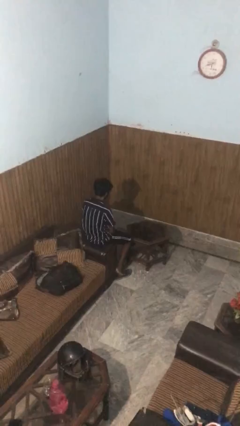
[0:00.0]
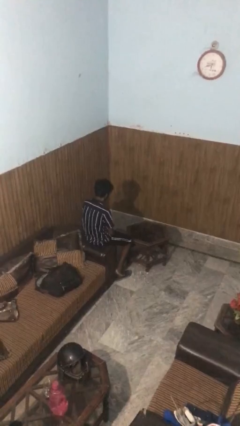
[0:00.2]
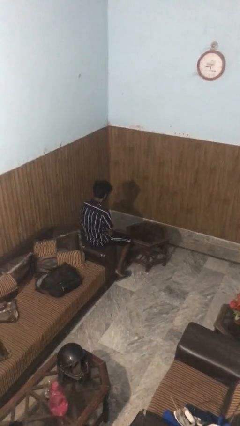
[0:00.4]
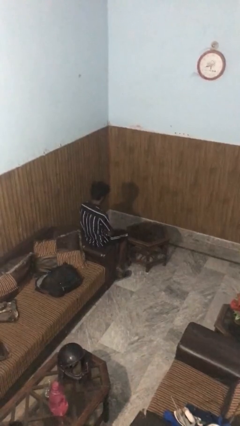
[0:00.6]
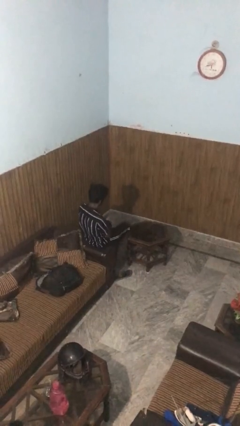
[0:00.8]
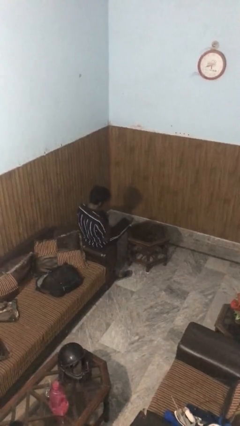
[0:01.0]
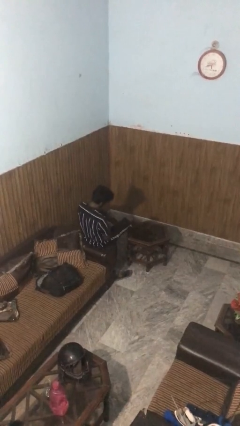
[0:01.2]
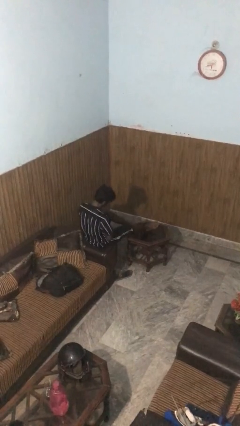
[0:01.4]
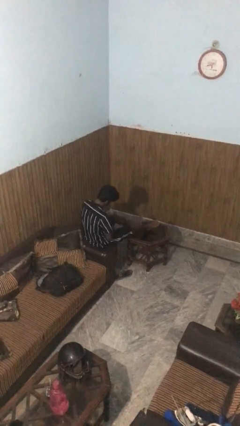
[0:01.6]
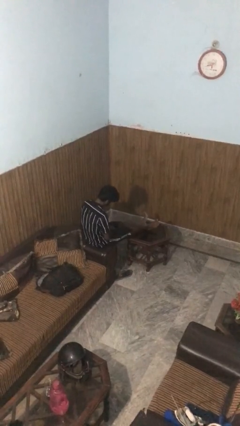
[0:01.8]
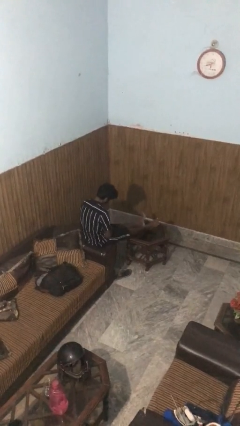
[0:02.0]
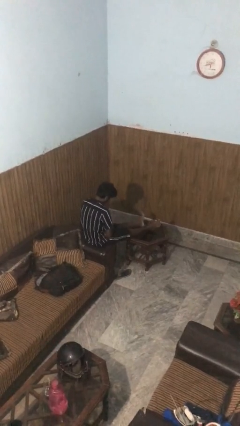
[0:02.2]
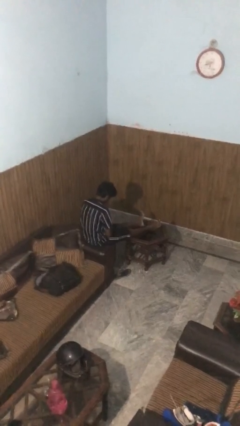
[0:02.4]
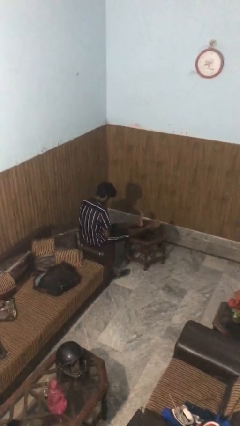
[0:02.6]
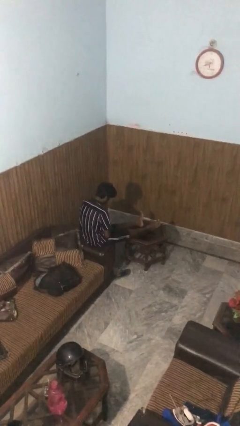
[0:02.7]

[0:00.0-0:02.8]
person puts feet up

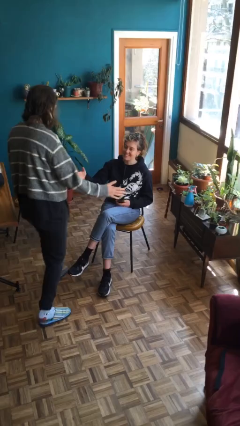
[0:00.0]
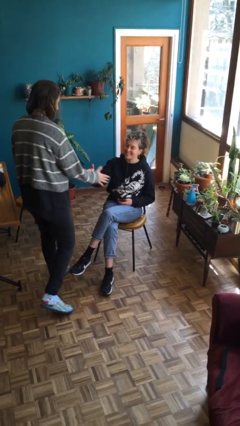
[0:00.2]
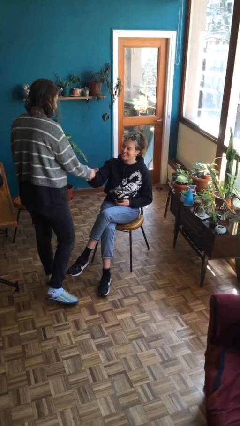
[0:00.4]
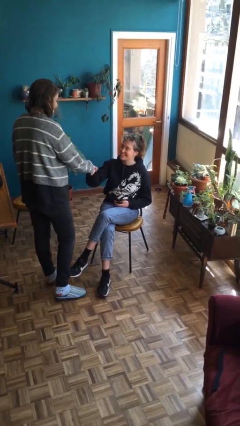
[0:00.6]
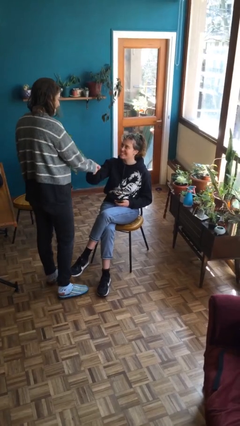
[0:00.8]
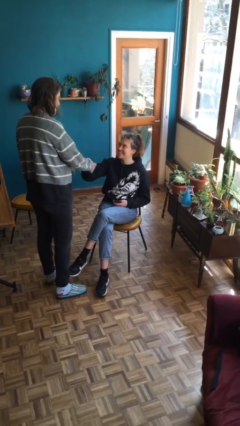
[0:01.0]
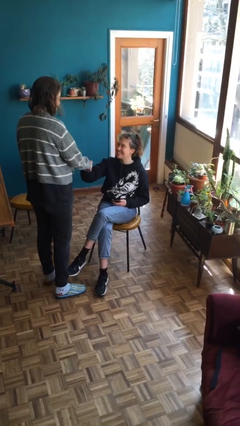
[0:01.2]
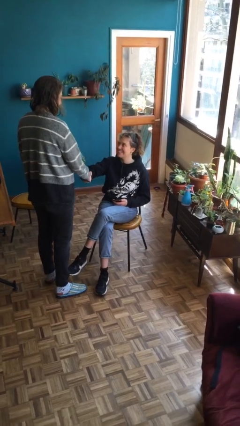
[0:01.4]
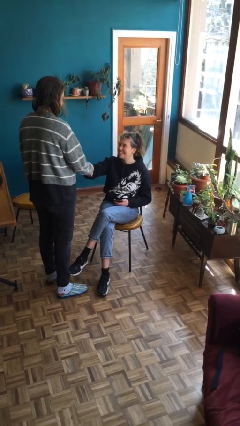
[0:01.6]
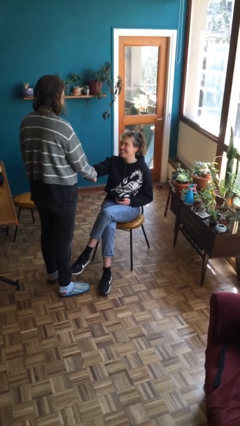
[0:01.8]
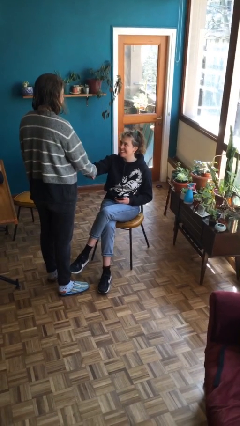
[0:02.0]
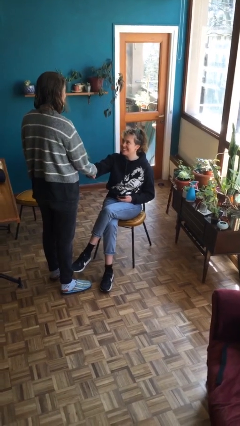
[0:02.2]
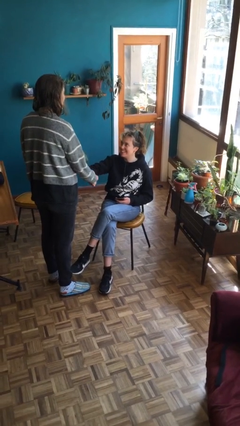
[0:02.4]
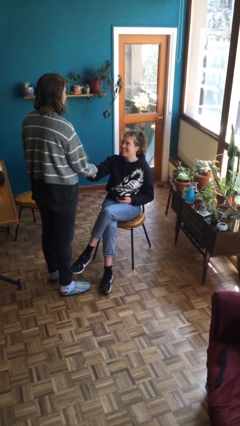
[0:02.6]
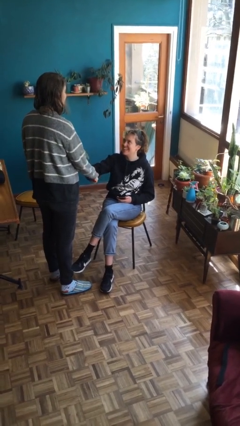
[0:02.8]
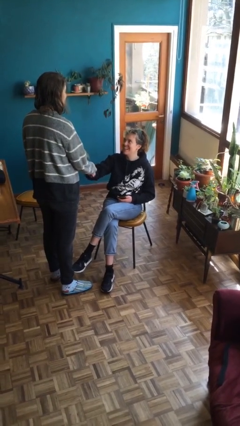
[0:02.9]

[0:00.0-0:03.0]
person shakes hand

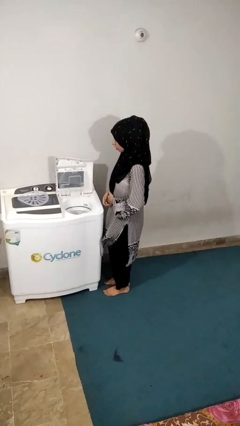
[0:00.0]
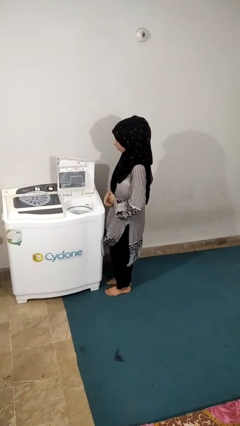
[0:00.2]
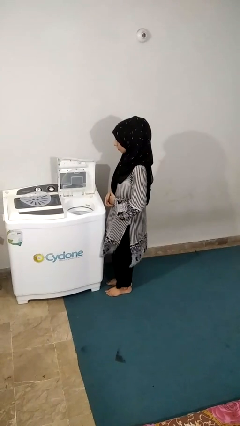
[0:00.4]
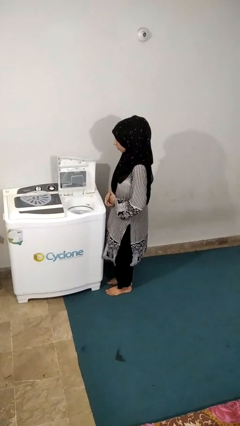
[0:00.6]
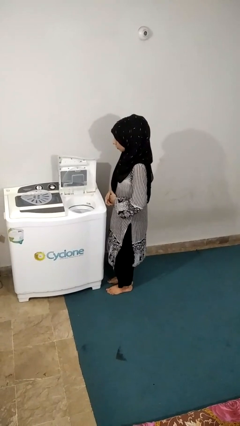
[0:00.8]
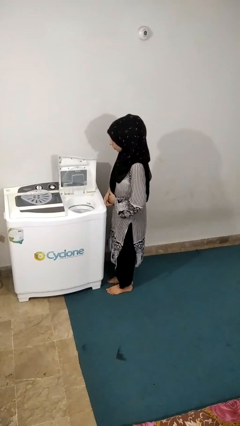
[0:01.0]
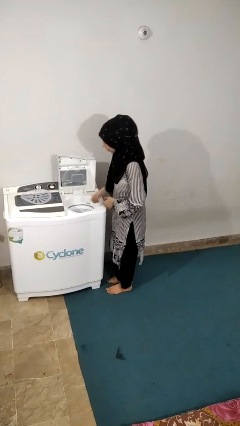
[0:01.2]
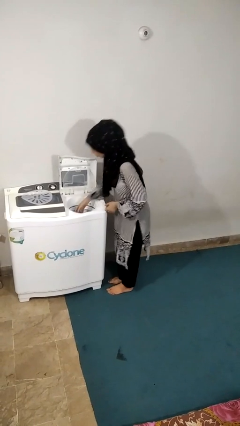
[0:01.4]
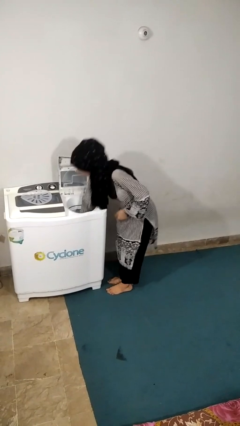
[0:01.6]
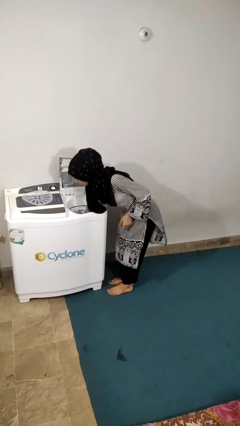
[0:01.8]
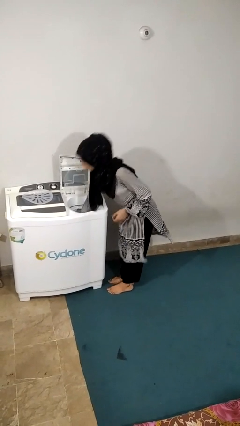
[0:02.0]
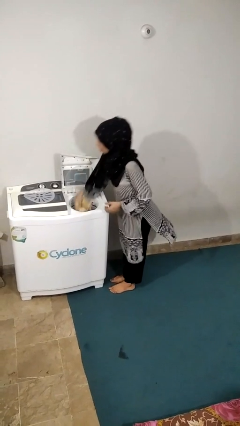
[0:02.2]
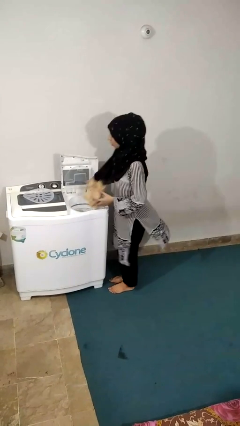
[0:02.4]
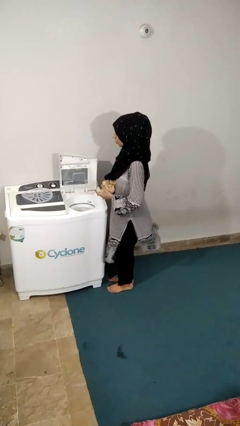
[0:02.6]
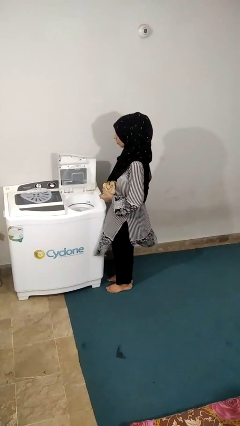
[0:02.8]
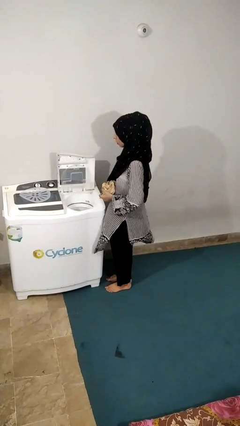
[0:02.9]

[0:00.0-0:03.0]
person unloads dryer

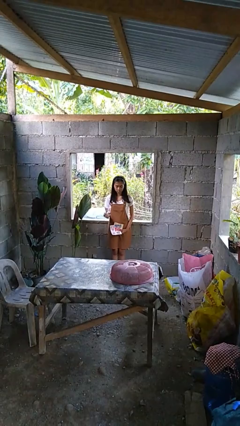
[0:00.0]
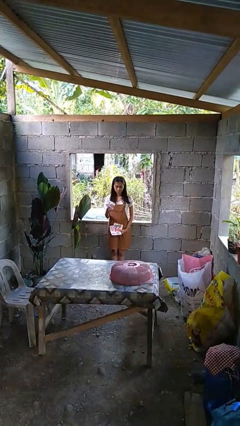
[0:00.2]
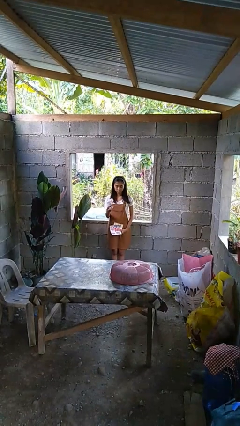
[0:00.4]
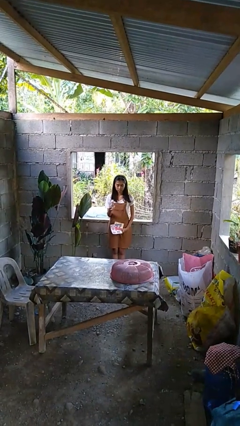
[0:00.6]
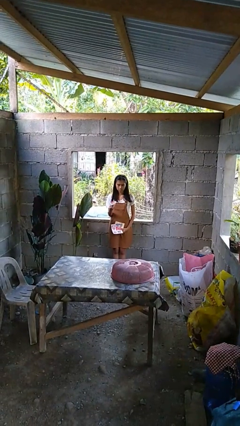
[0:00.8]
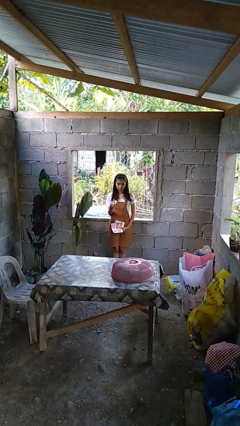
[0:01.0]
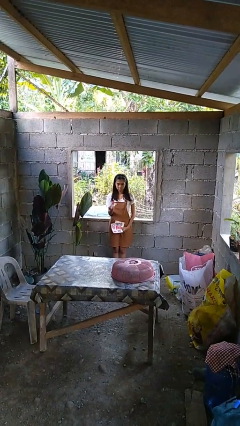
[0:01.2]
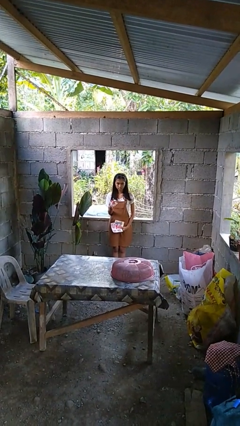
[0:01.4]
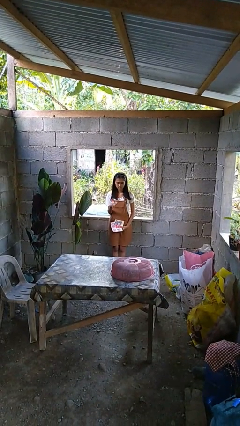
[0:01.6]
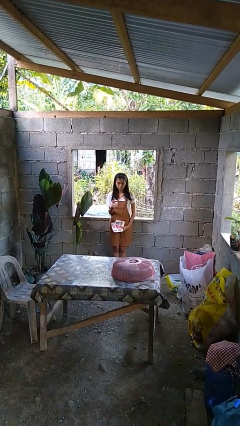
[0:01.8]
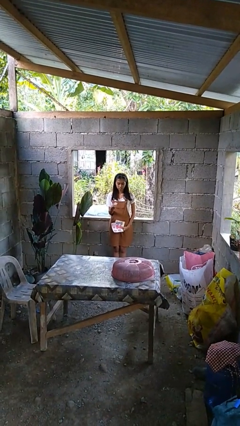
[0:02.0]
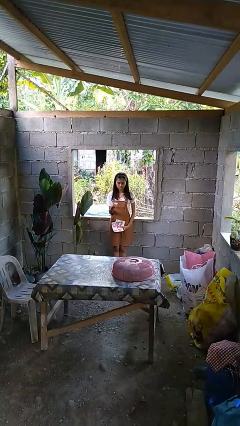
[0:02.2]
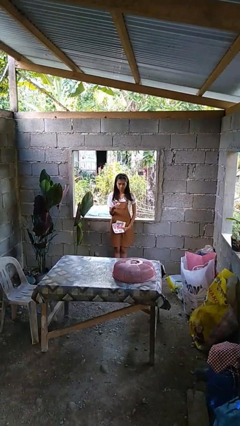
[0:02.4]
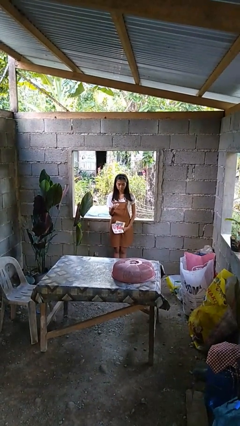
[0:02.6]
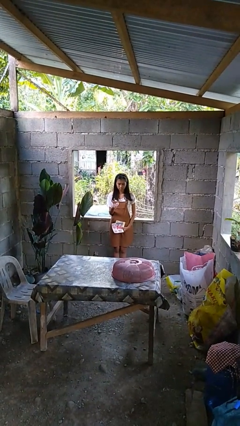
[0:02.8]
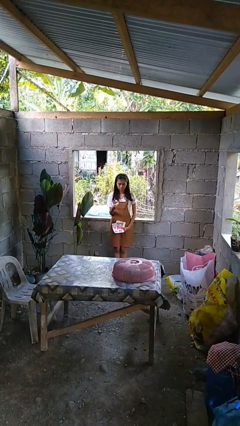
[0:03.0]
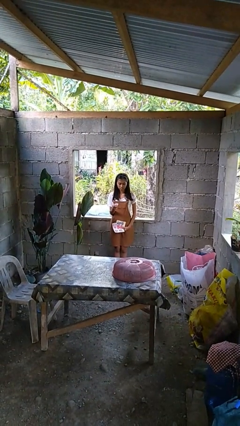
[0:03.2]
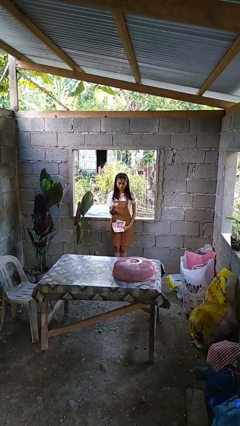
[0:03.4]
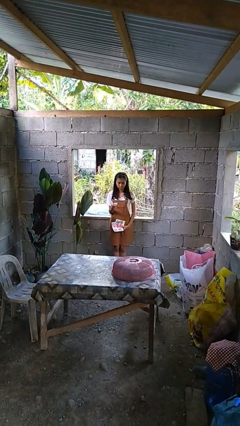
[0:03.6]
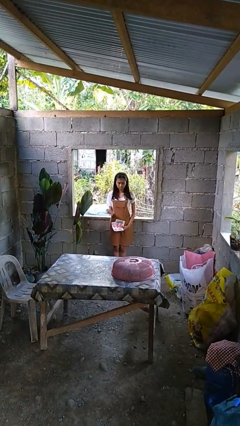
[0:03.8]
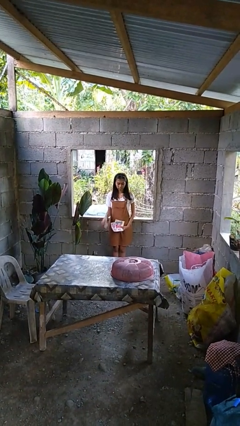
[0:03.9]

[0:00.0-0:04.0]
person crumples paper

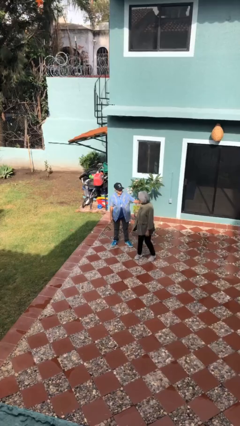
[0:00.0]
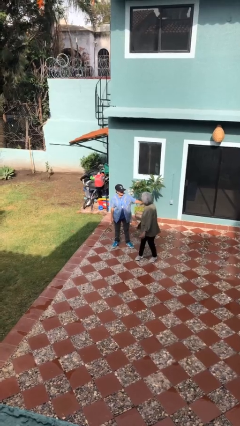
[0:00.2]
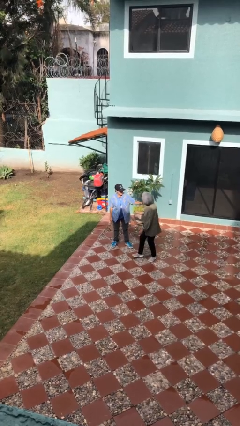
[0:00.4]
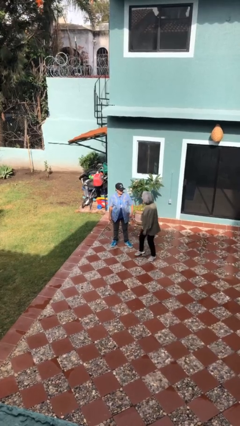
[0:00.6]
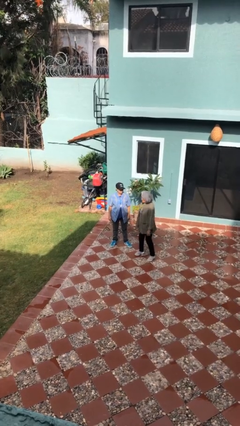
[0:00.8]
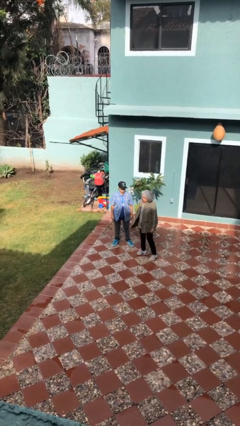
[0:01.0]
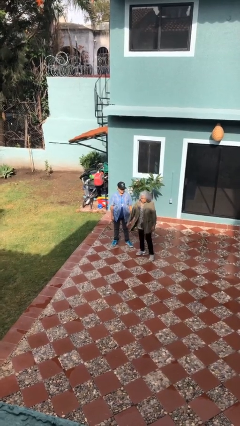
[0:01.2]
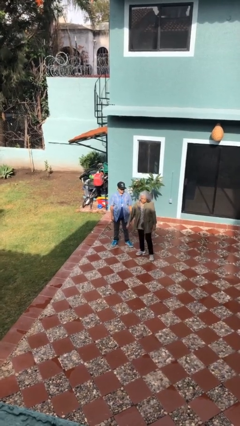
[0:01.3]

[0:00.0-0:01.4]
person spins person around

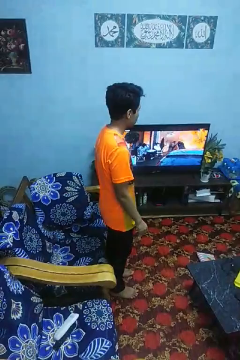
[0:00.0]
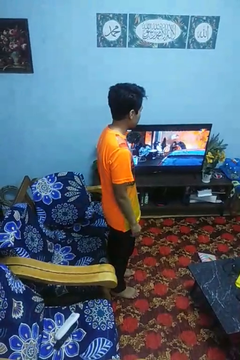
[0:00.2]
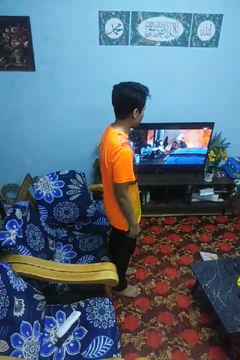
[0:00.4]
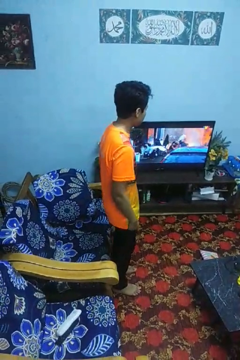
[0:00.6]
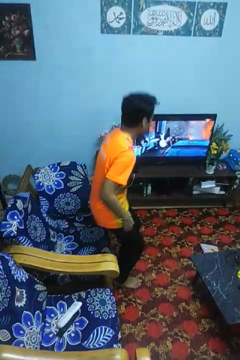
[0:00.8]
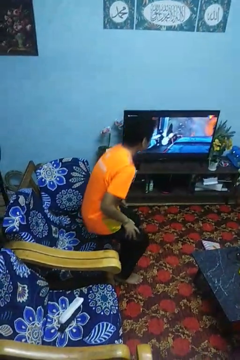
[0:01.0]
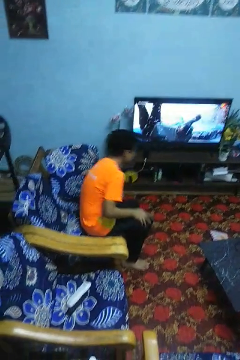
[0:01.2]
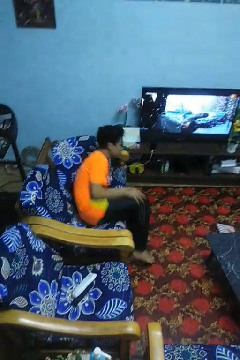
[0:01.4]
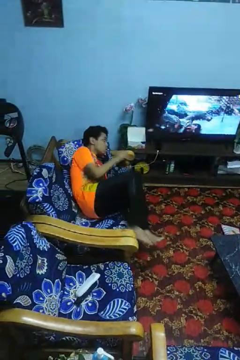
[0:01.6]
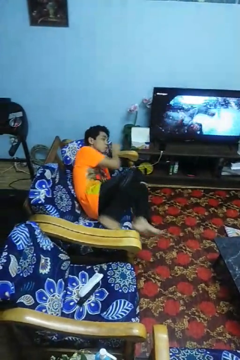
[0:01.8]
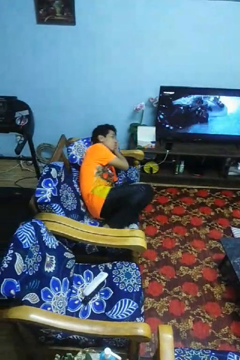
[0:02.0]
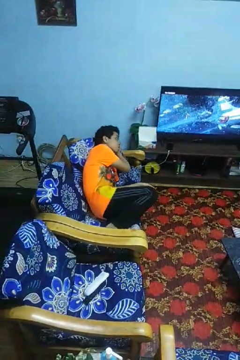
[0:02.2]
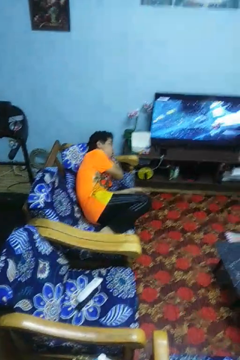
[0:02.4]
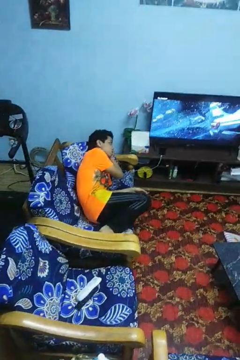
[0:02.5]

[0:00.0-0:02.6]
person lies down on couch

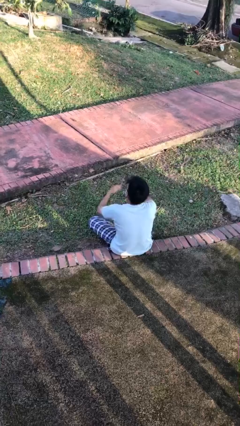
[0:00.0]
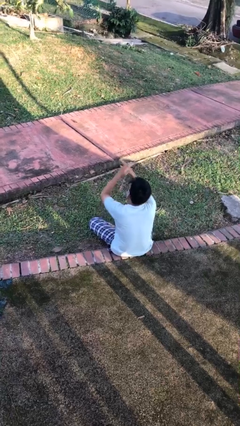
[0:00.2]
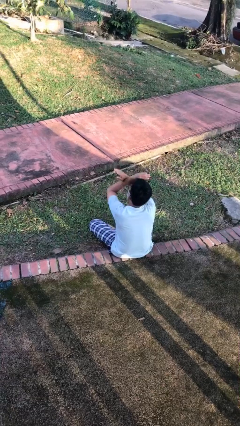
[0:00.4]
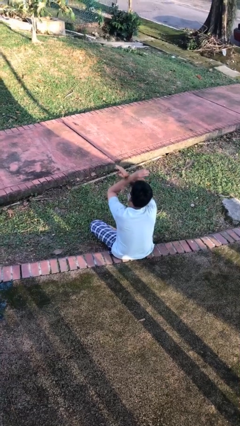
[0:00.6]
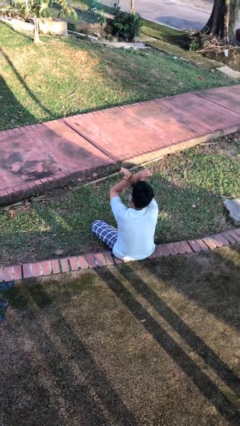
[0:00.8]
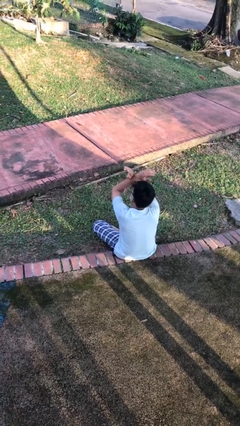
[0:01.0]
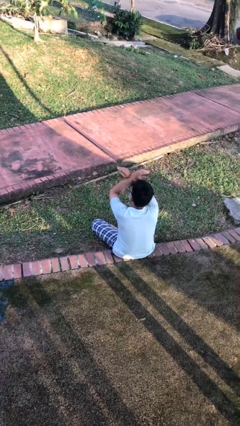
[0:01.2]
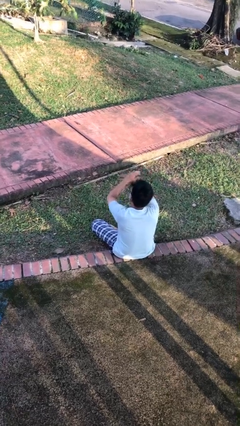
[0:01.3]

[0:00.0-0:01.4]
person gestures arms x
